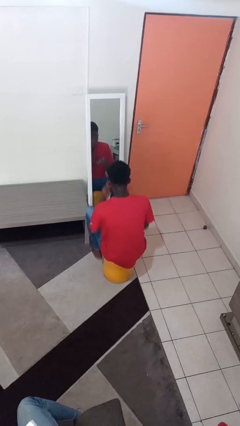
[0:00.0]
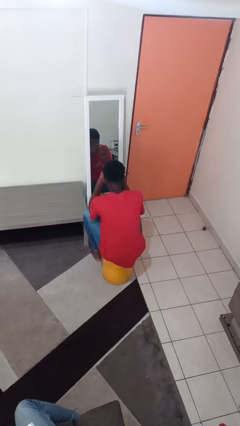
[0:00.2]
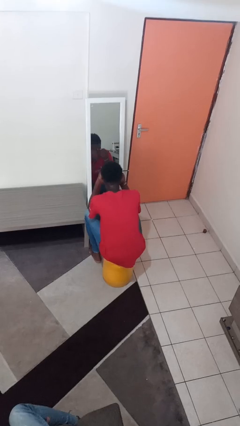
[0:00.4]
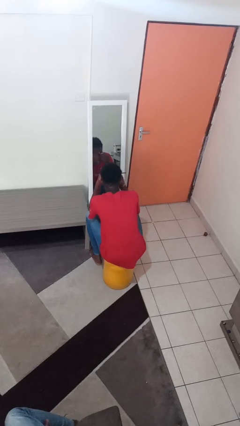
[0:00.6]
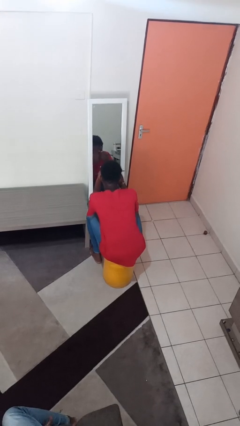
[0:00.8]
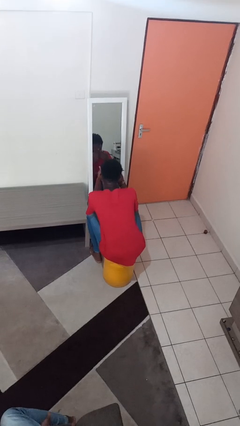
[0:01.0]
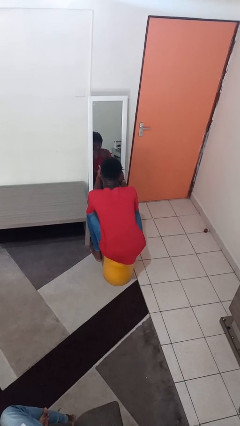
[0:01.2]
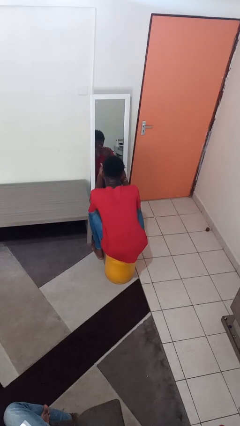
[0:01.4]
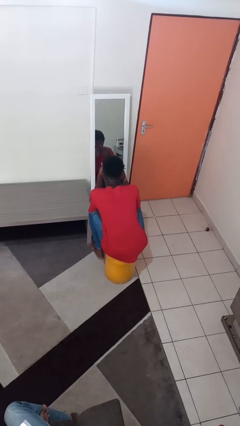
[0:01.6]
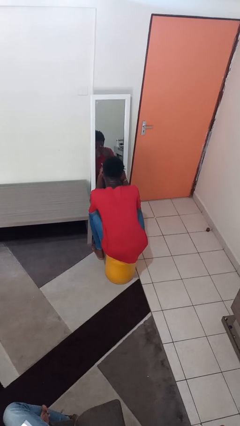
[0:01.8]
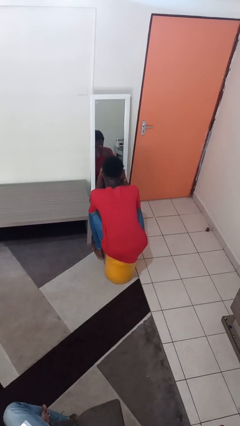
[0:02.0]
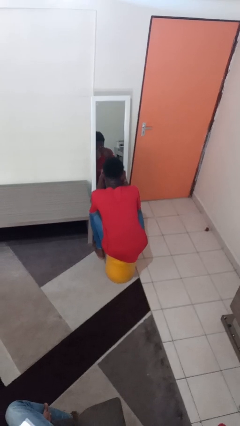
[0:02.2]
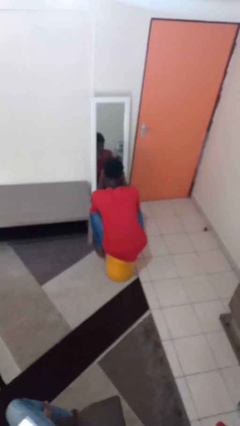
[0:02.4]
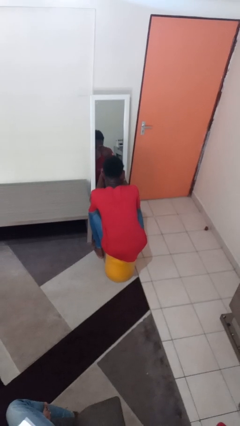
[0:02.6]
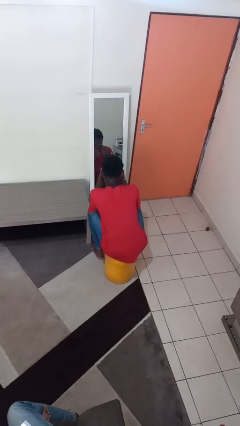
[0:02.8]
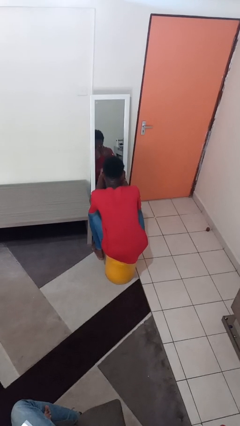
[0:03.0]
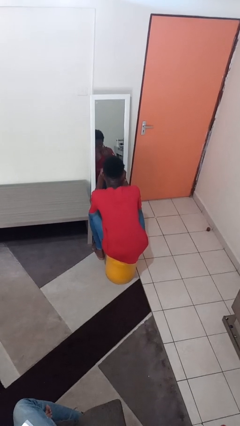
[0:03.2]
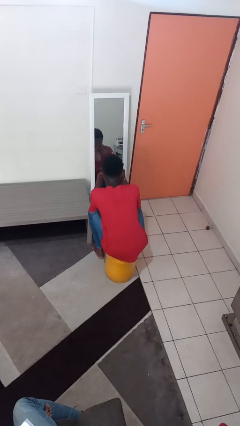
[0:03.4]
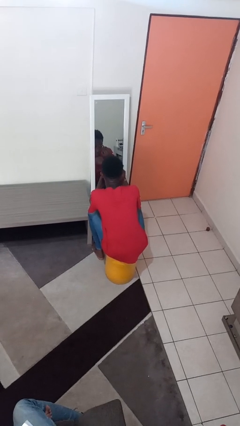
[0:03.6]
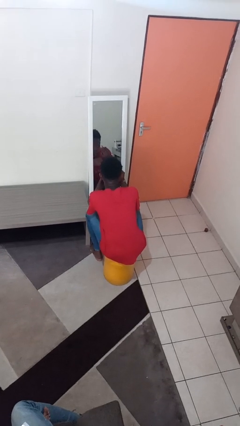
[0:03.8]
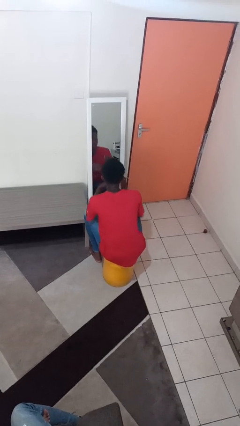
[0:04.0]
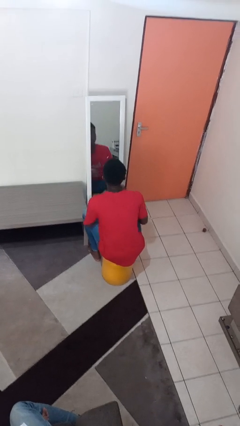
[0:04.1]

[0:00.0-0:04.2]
person applies eye makeup

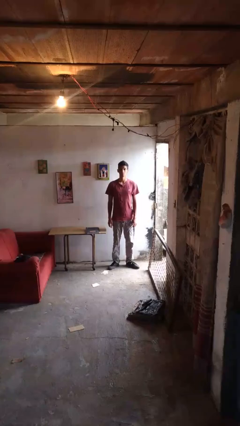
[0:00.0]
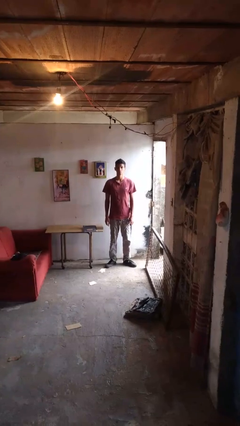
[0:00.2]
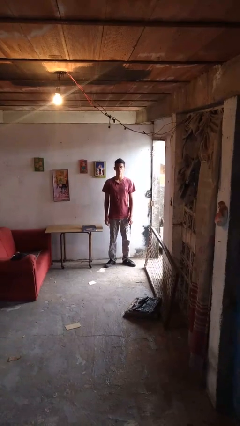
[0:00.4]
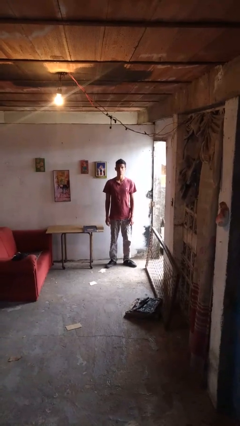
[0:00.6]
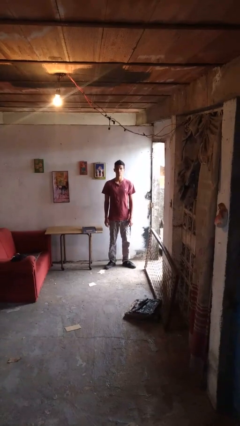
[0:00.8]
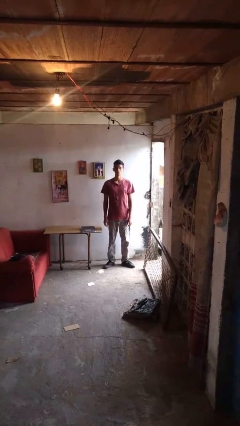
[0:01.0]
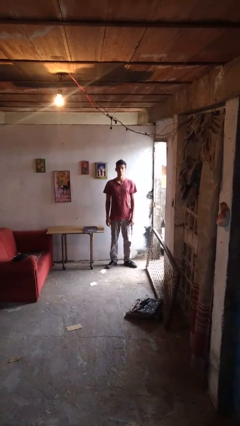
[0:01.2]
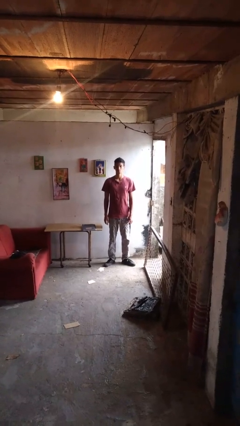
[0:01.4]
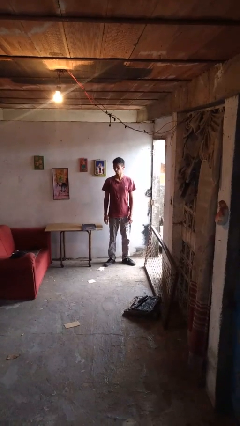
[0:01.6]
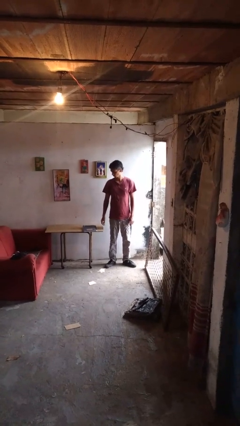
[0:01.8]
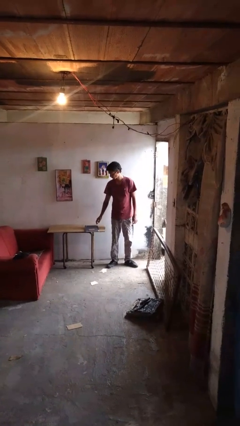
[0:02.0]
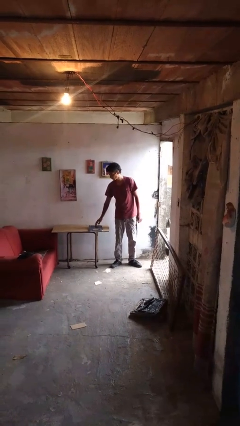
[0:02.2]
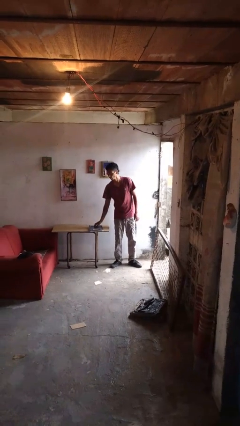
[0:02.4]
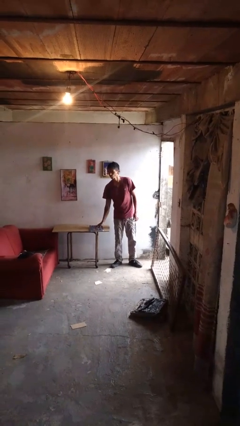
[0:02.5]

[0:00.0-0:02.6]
person drops object

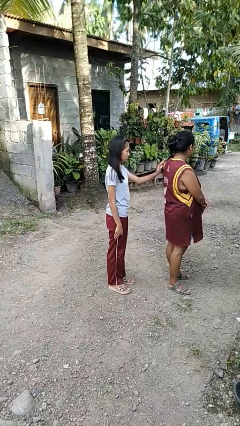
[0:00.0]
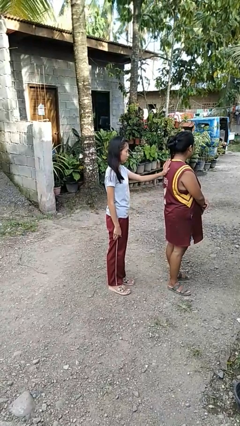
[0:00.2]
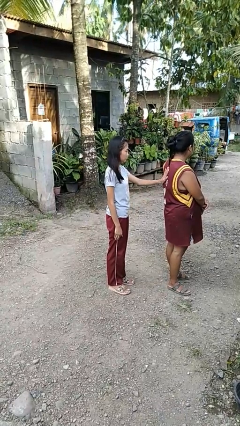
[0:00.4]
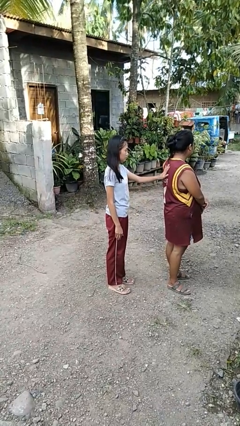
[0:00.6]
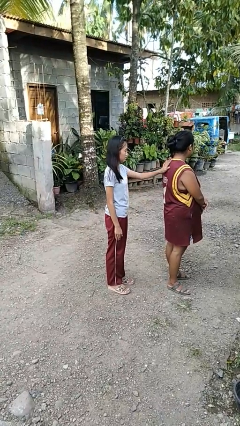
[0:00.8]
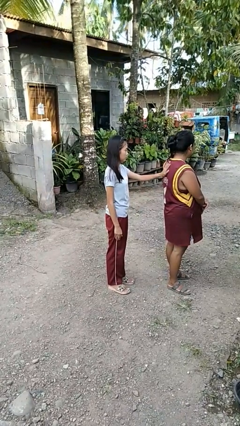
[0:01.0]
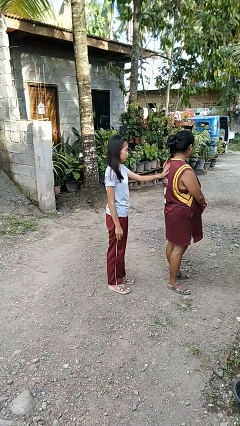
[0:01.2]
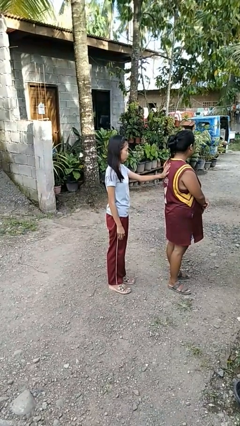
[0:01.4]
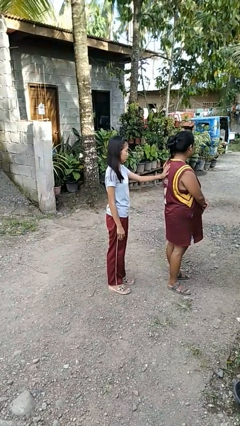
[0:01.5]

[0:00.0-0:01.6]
person touches back of person

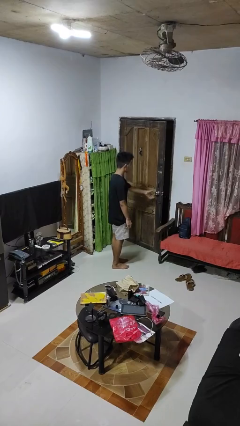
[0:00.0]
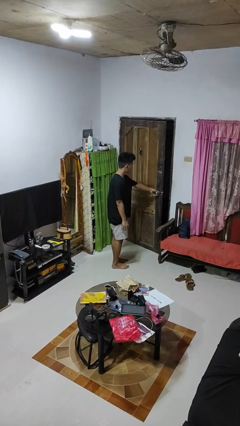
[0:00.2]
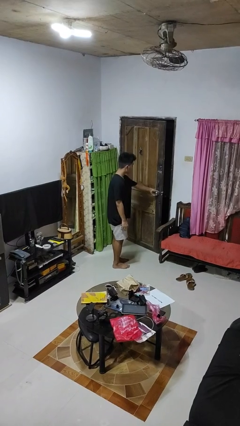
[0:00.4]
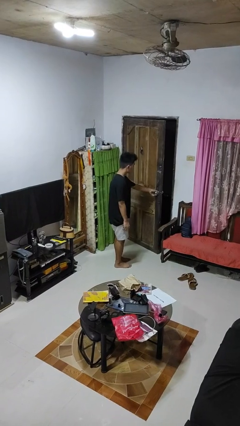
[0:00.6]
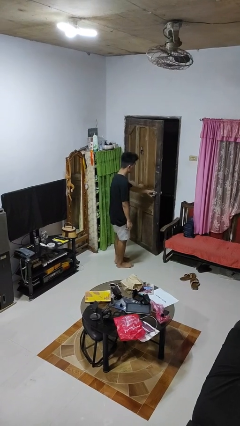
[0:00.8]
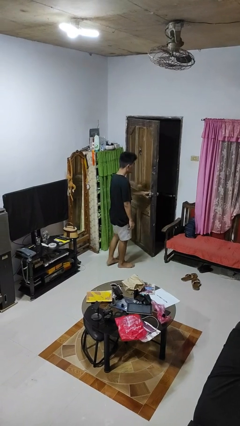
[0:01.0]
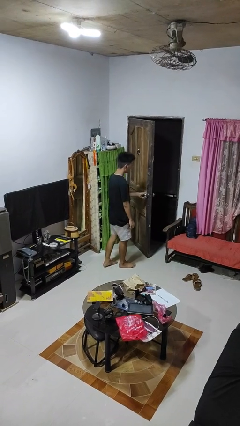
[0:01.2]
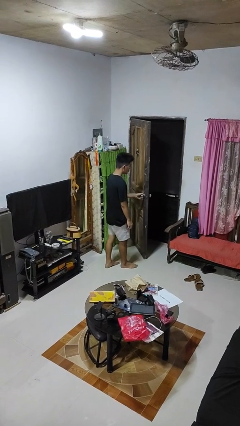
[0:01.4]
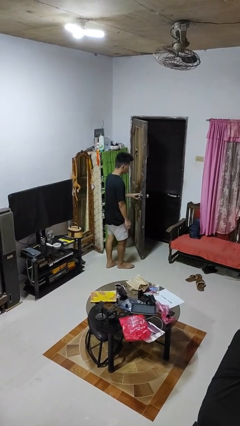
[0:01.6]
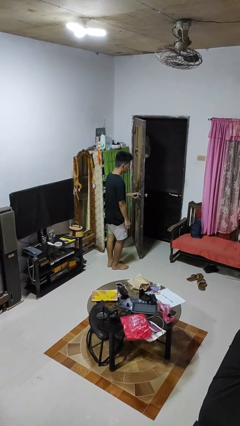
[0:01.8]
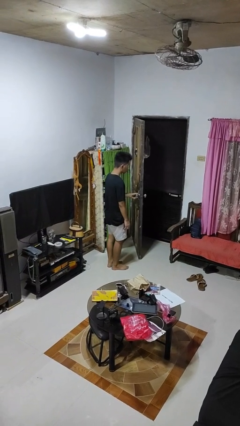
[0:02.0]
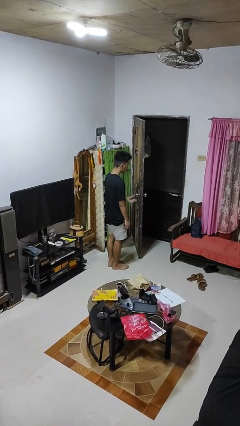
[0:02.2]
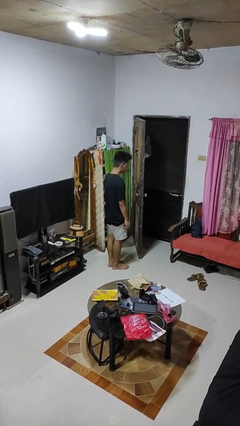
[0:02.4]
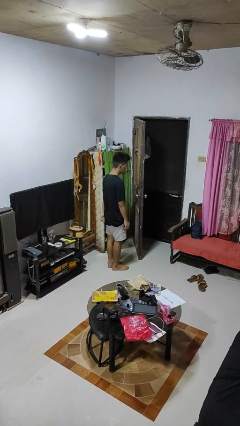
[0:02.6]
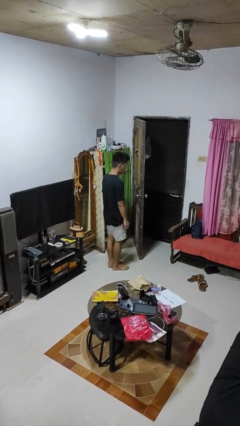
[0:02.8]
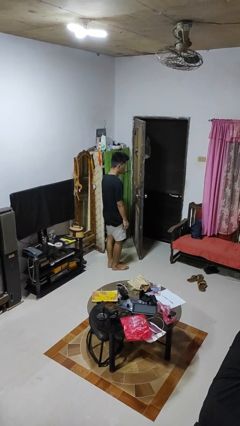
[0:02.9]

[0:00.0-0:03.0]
person opens facility door

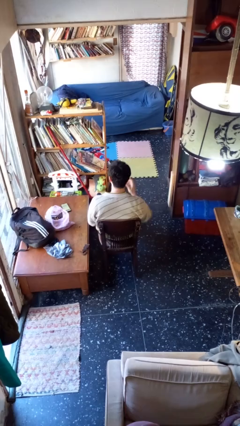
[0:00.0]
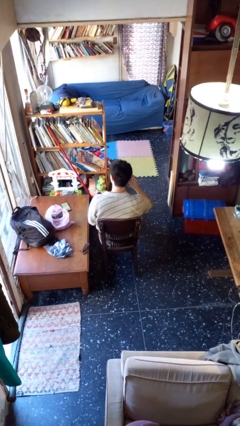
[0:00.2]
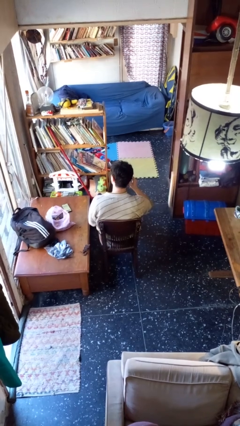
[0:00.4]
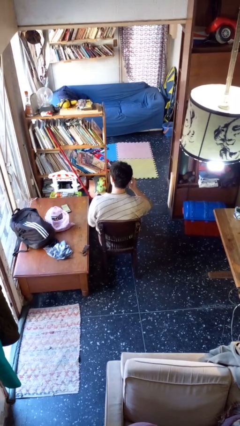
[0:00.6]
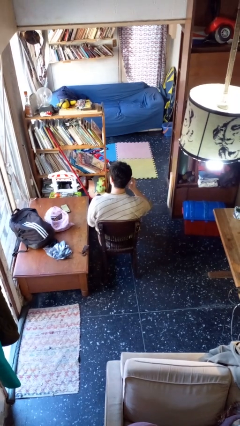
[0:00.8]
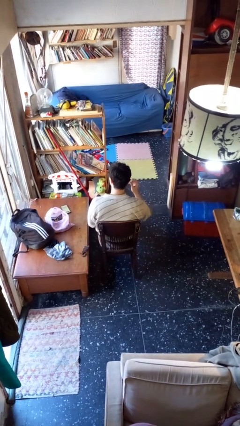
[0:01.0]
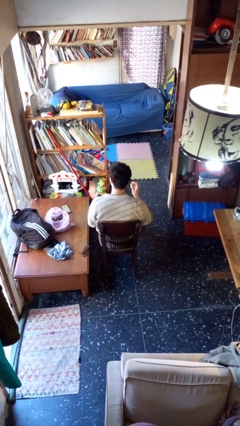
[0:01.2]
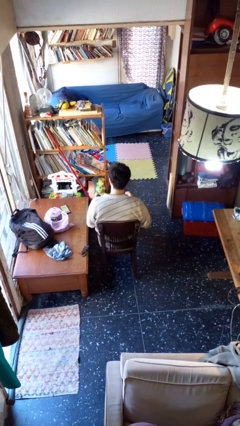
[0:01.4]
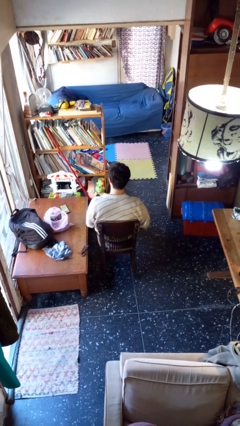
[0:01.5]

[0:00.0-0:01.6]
person takes off earrings

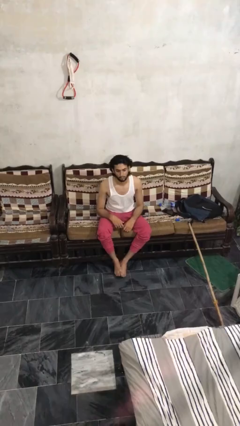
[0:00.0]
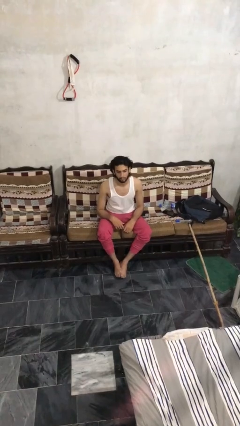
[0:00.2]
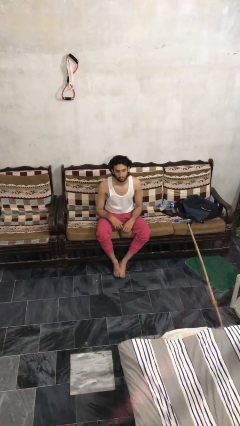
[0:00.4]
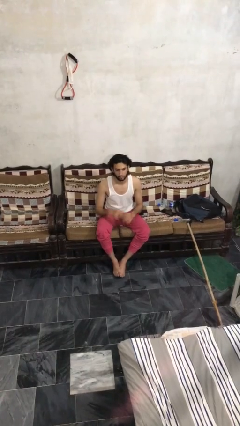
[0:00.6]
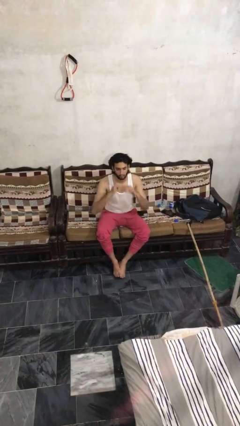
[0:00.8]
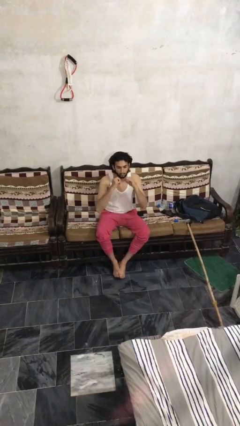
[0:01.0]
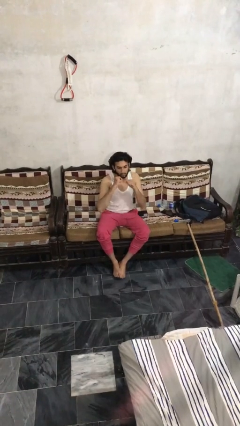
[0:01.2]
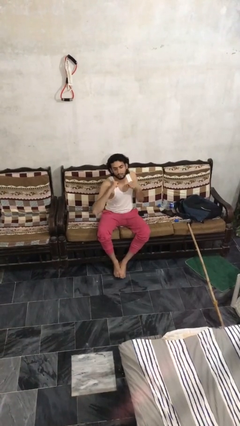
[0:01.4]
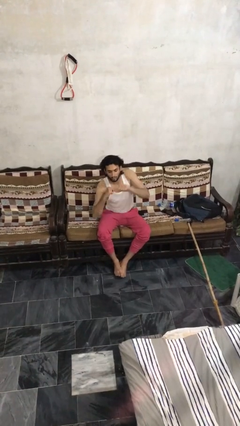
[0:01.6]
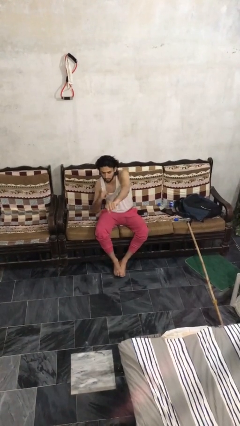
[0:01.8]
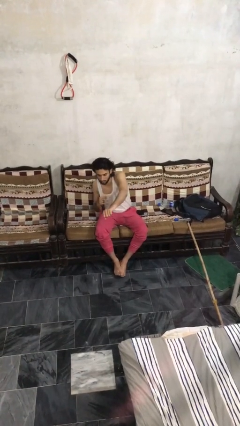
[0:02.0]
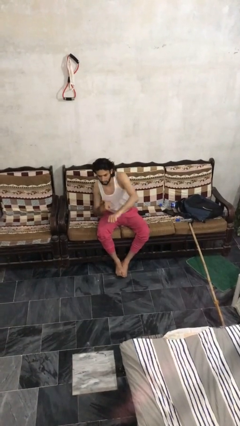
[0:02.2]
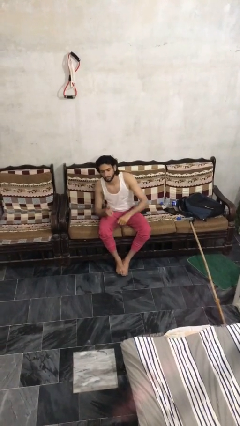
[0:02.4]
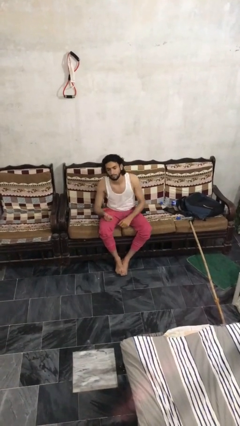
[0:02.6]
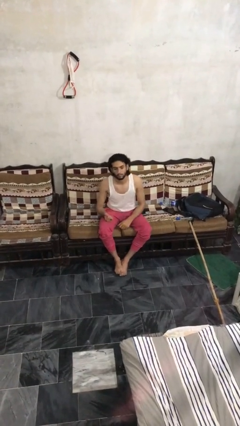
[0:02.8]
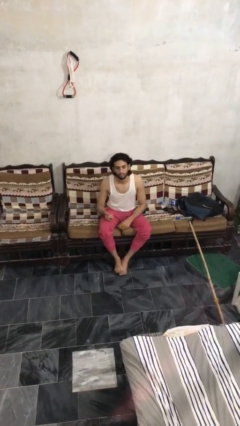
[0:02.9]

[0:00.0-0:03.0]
person punches

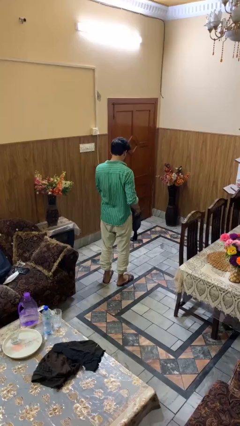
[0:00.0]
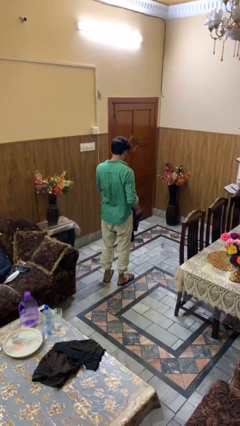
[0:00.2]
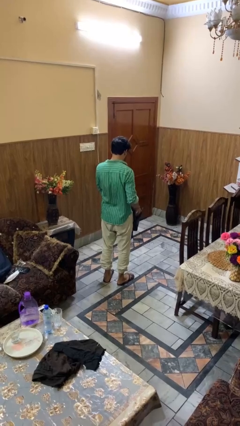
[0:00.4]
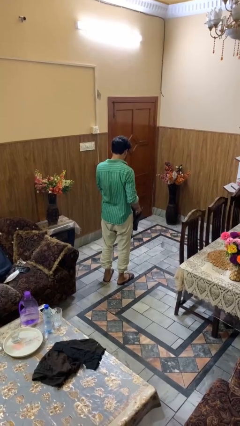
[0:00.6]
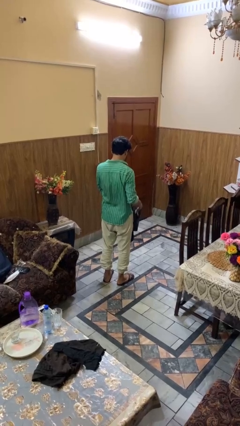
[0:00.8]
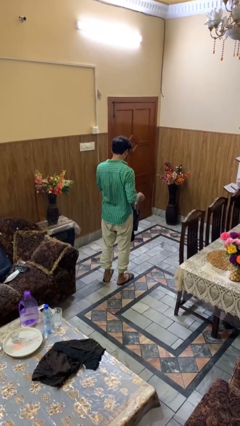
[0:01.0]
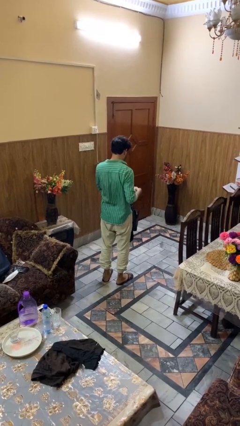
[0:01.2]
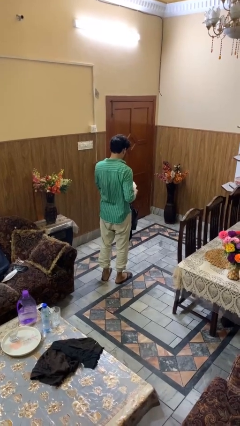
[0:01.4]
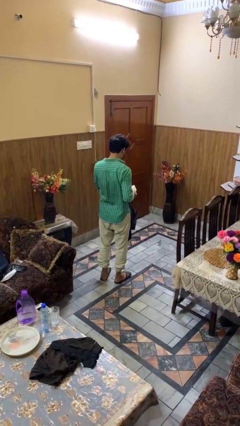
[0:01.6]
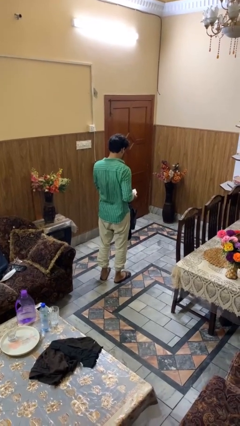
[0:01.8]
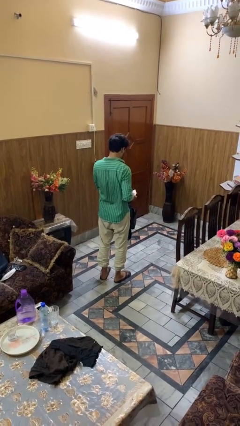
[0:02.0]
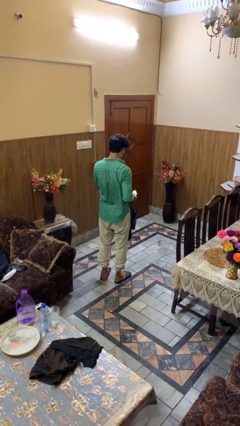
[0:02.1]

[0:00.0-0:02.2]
person takes object from purse
